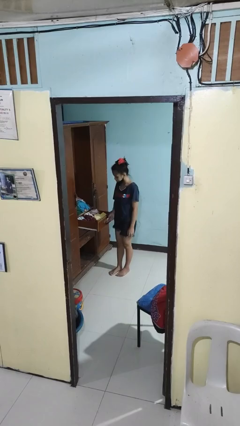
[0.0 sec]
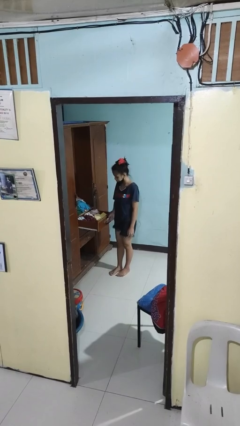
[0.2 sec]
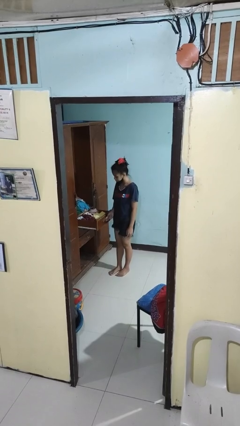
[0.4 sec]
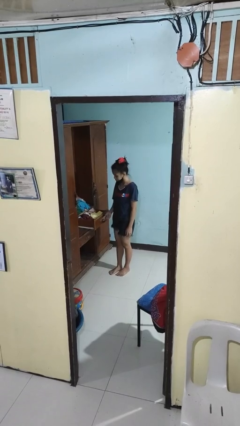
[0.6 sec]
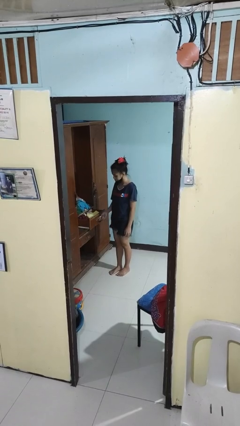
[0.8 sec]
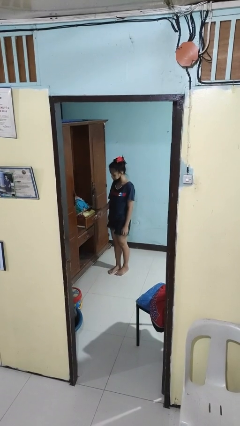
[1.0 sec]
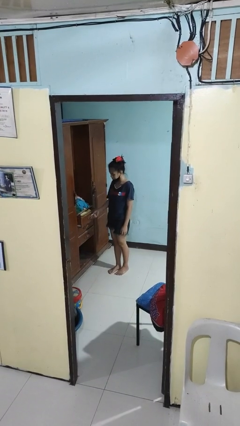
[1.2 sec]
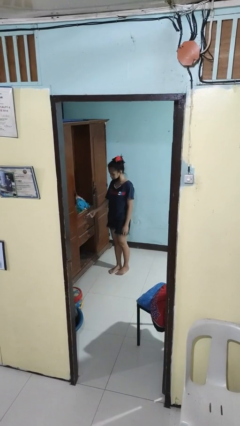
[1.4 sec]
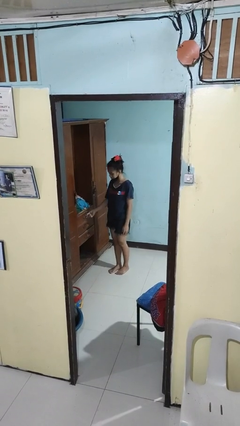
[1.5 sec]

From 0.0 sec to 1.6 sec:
person closes dresser drawer

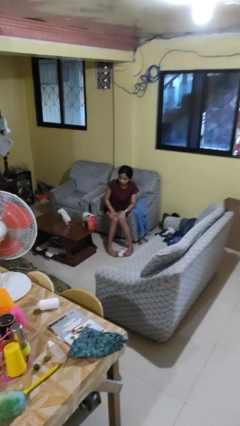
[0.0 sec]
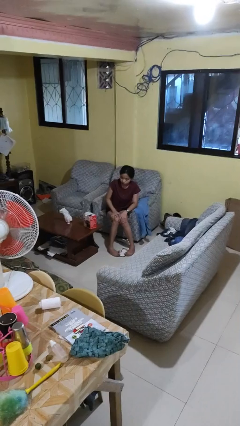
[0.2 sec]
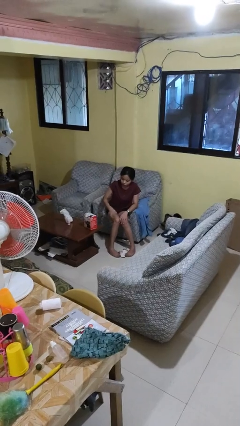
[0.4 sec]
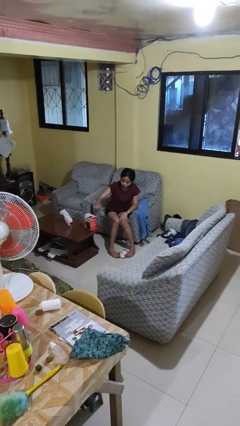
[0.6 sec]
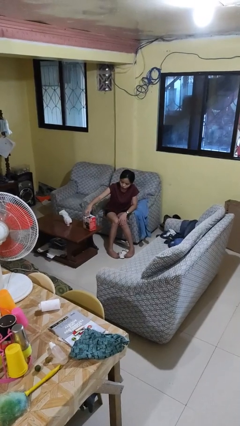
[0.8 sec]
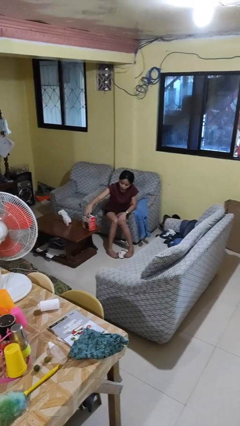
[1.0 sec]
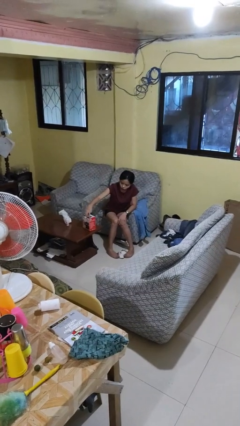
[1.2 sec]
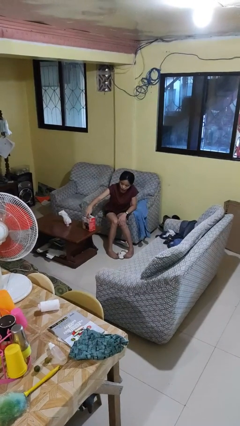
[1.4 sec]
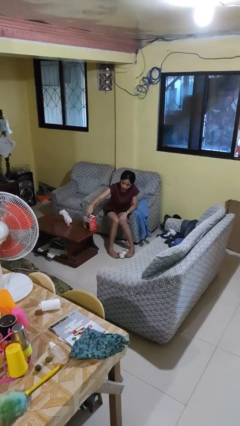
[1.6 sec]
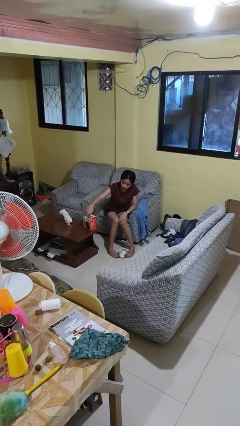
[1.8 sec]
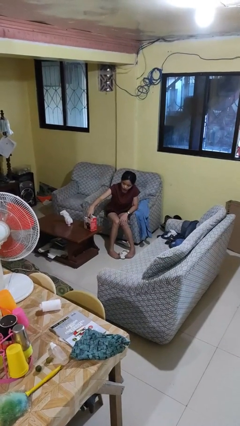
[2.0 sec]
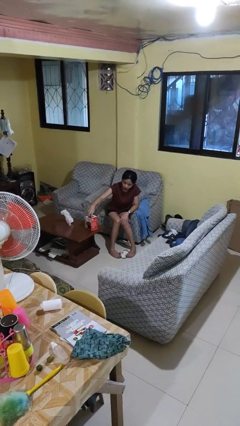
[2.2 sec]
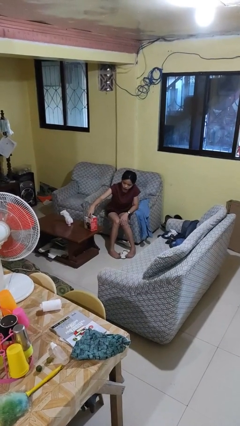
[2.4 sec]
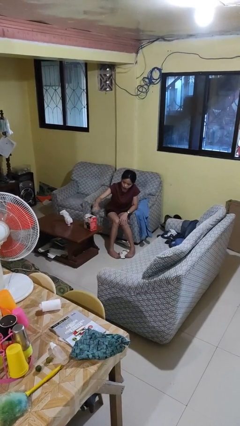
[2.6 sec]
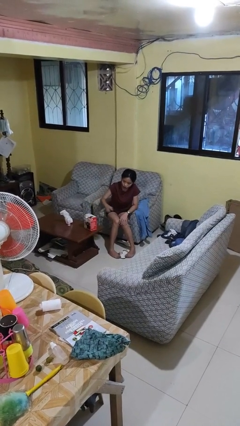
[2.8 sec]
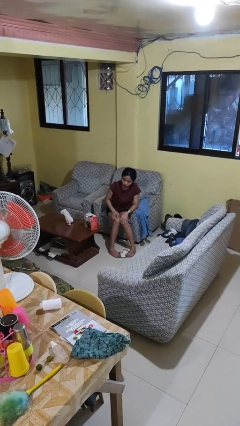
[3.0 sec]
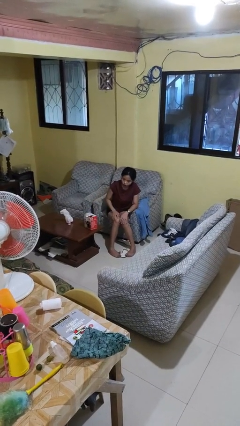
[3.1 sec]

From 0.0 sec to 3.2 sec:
person taps object with finger

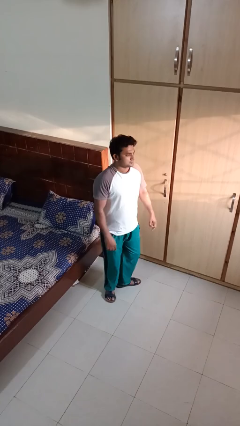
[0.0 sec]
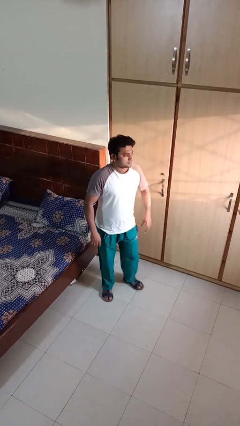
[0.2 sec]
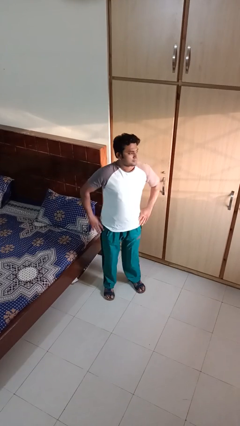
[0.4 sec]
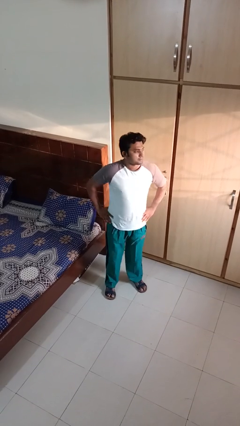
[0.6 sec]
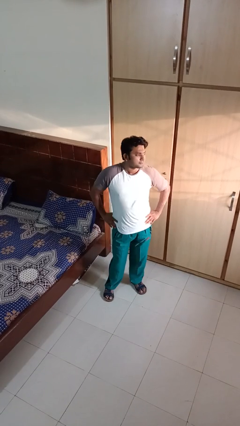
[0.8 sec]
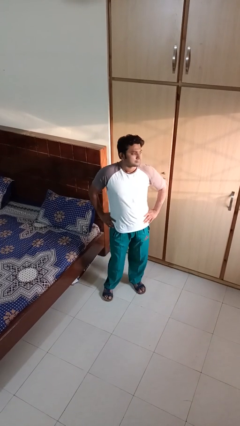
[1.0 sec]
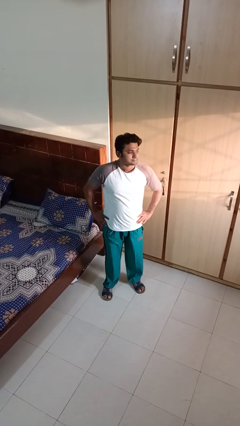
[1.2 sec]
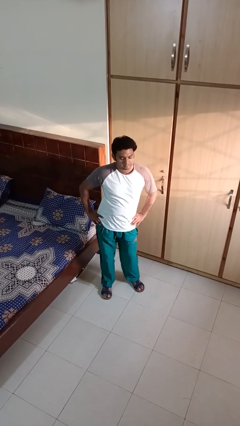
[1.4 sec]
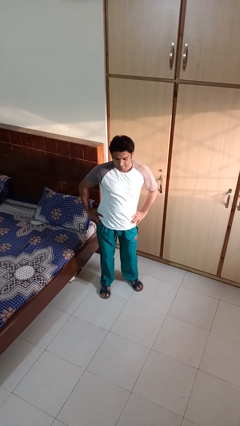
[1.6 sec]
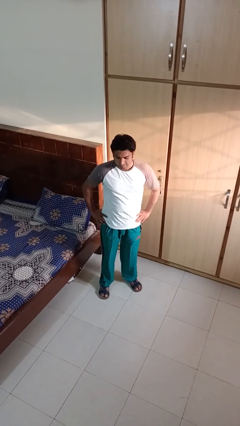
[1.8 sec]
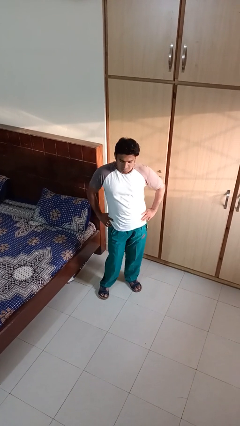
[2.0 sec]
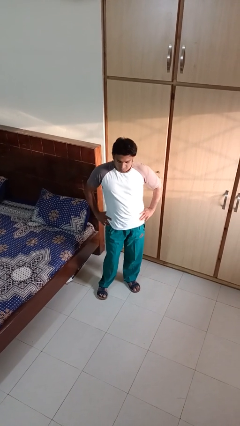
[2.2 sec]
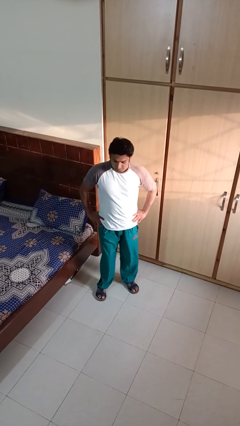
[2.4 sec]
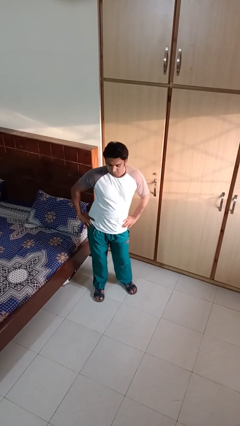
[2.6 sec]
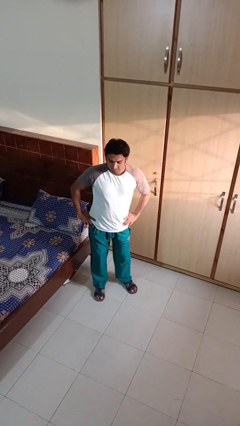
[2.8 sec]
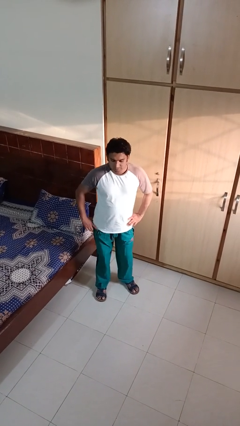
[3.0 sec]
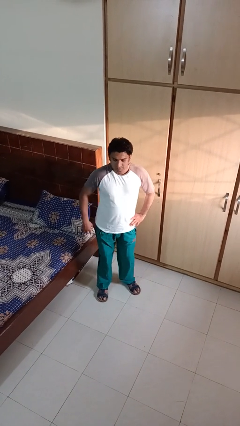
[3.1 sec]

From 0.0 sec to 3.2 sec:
person wiggles hips

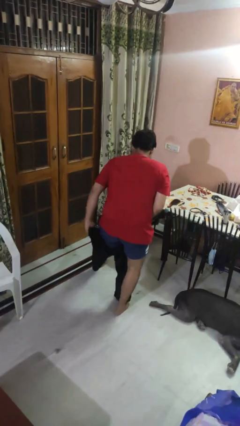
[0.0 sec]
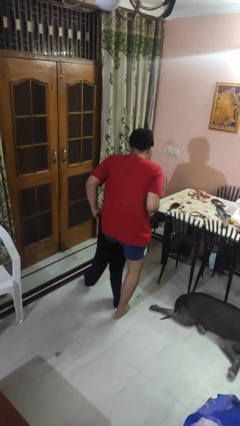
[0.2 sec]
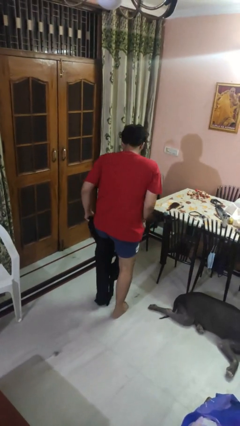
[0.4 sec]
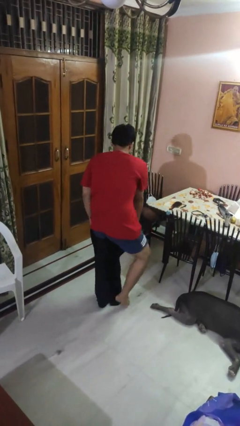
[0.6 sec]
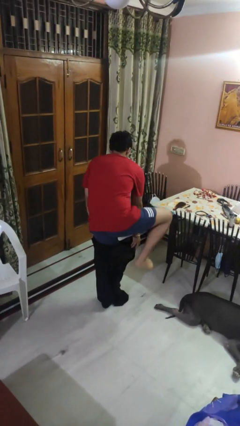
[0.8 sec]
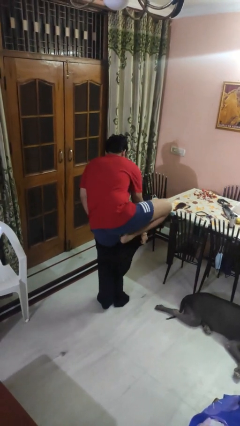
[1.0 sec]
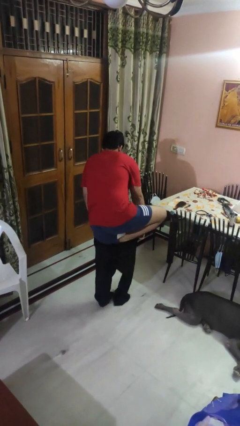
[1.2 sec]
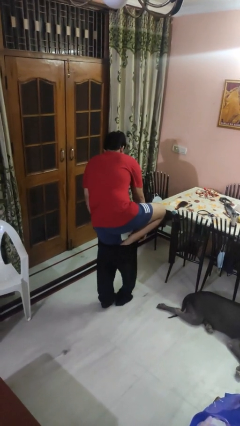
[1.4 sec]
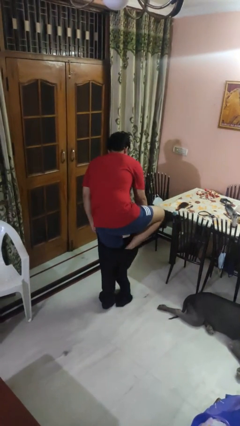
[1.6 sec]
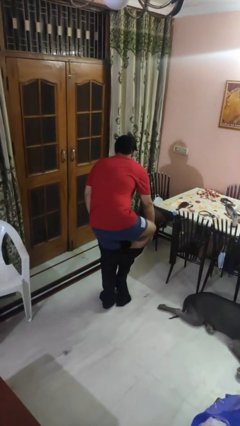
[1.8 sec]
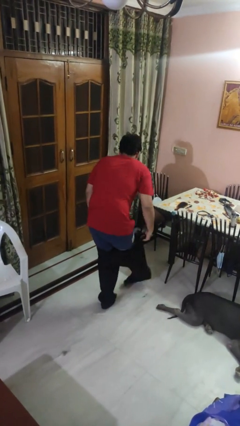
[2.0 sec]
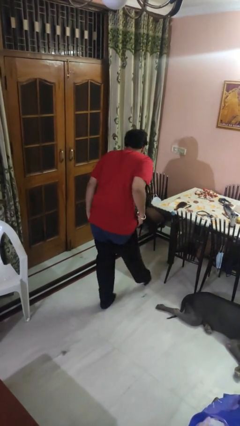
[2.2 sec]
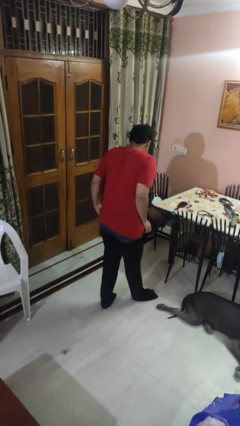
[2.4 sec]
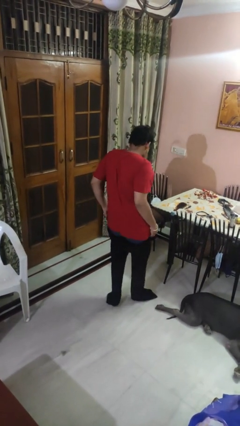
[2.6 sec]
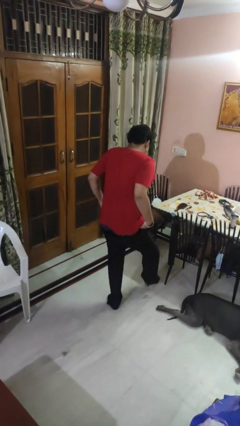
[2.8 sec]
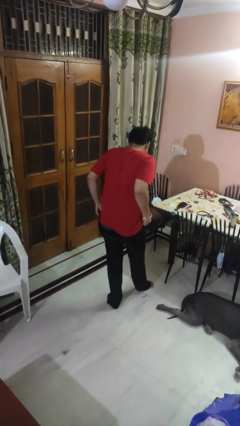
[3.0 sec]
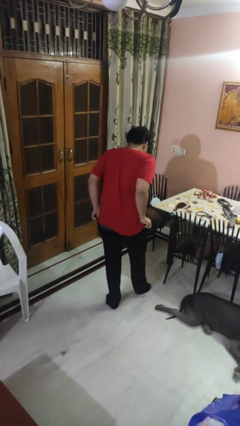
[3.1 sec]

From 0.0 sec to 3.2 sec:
person puts on pants

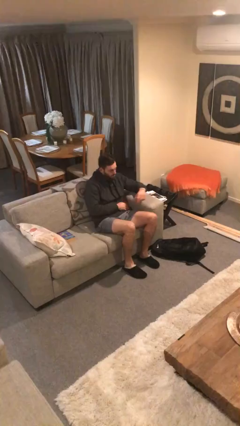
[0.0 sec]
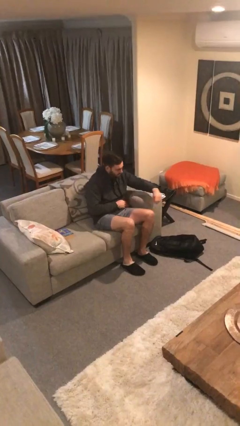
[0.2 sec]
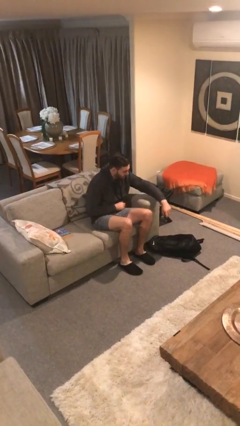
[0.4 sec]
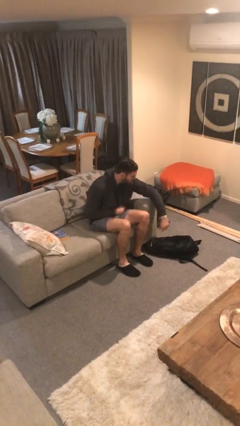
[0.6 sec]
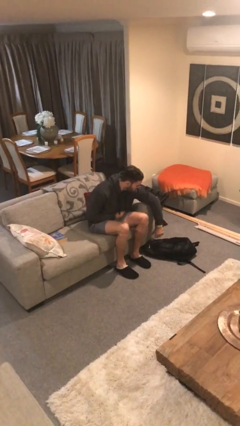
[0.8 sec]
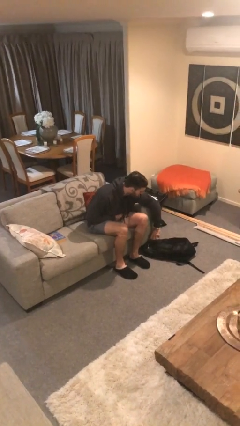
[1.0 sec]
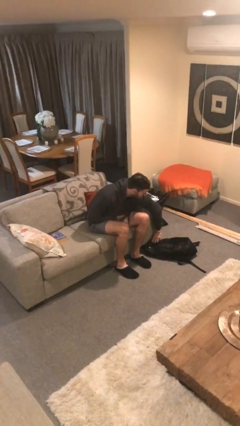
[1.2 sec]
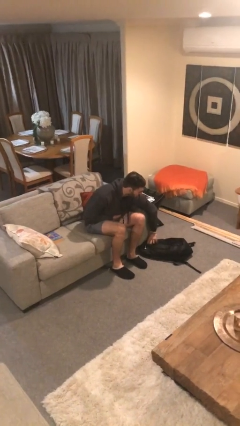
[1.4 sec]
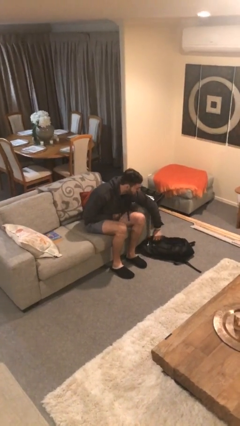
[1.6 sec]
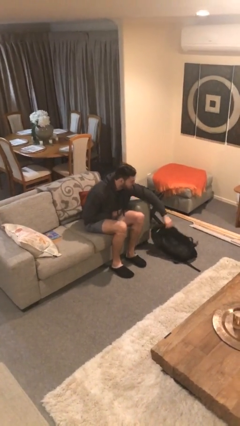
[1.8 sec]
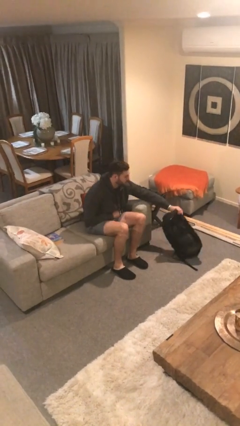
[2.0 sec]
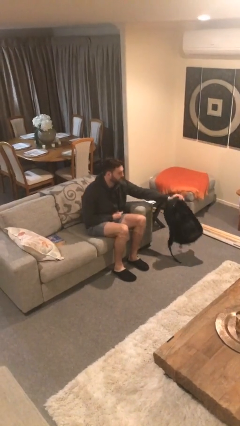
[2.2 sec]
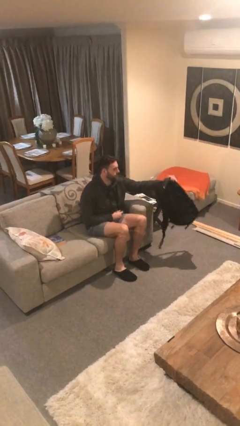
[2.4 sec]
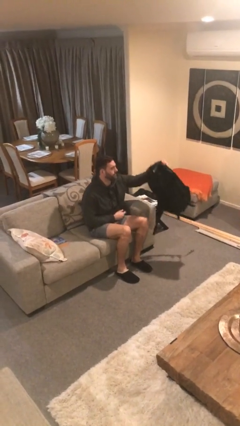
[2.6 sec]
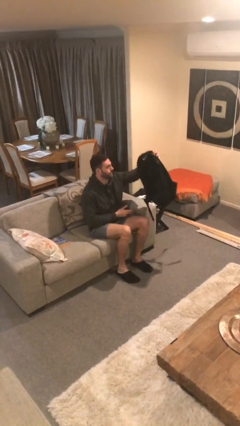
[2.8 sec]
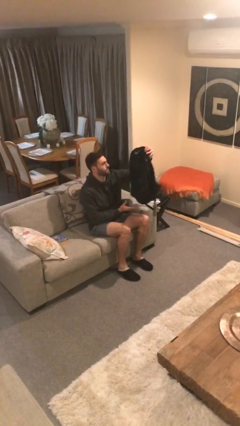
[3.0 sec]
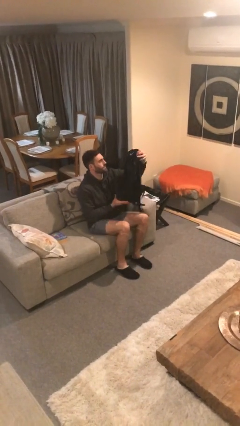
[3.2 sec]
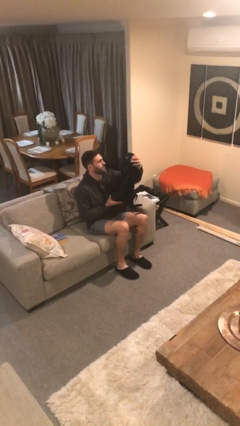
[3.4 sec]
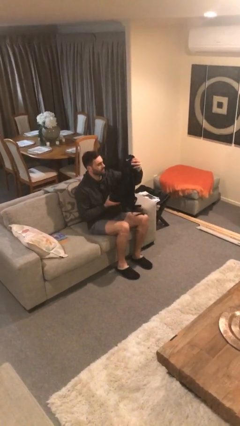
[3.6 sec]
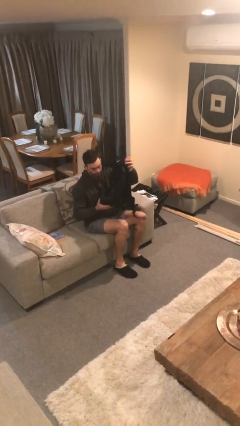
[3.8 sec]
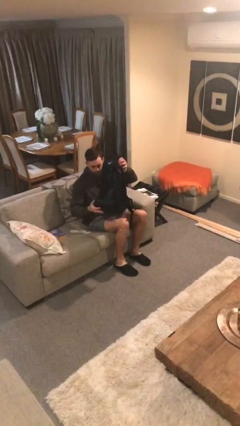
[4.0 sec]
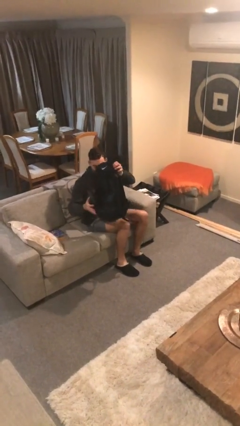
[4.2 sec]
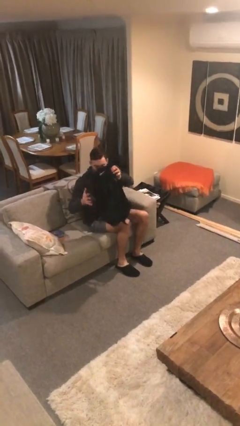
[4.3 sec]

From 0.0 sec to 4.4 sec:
person picks up object from floor

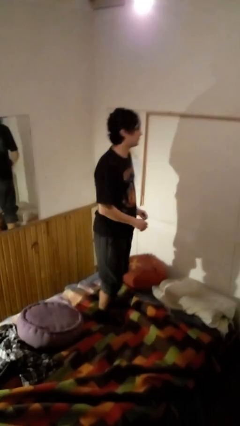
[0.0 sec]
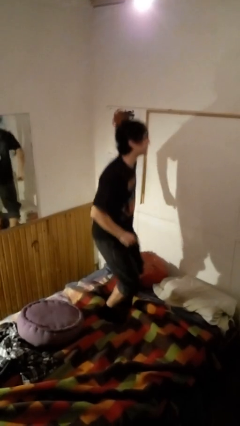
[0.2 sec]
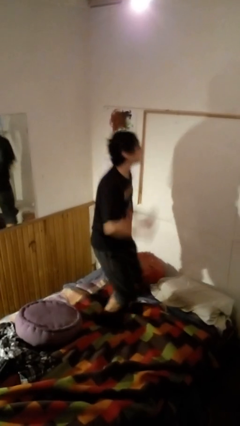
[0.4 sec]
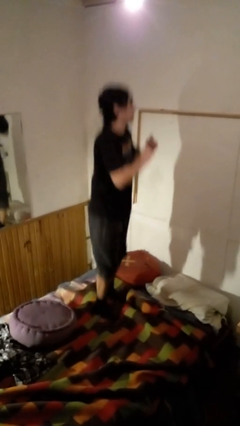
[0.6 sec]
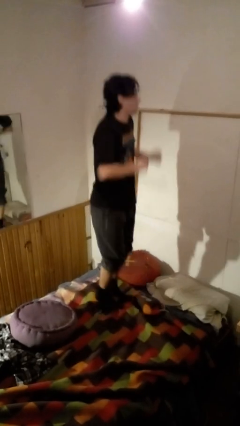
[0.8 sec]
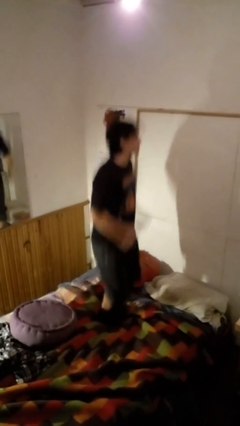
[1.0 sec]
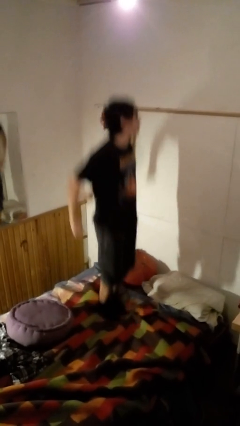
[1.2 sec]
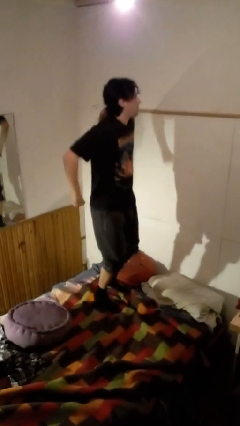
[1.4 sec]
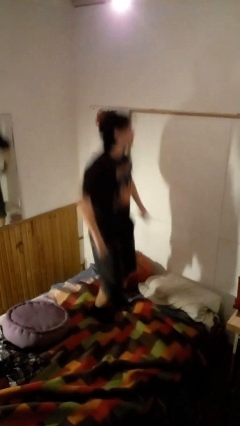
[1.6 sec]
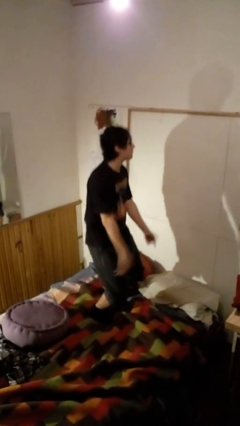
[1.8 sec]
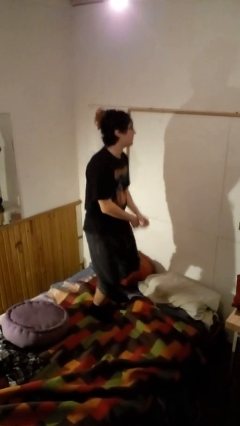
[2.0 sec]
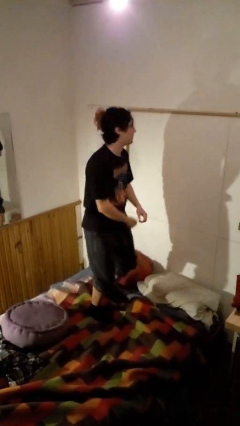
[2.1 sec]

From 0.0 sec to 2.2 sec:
person jumps on bed
